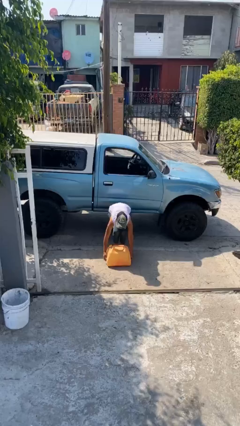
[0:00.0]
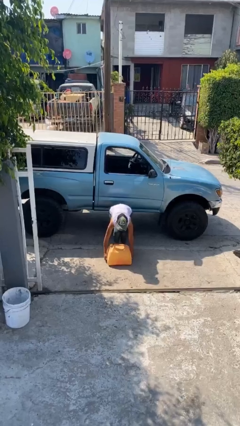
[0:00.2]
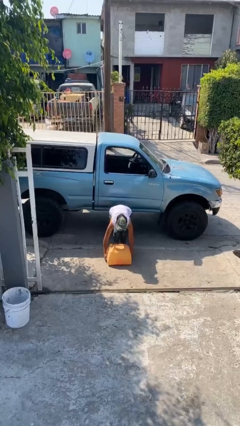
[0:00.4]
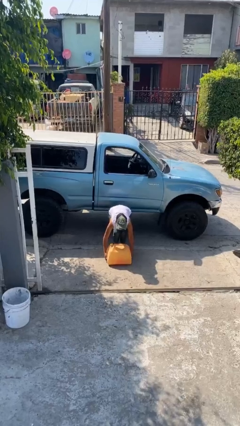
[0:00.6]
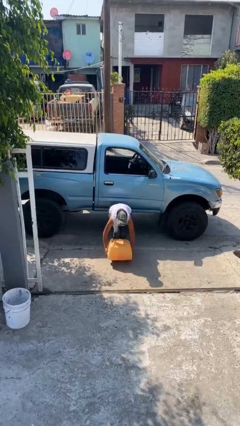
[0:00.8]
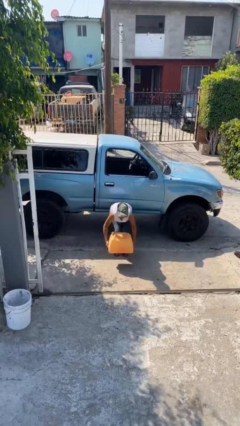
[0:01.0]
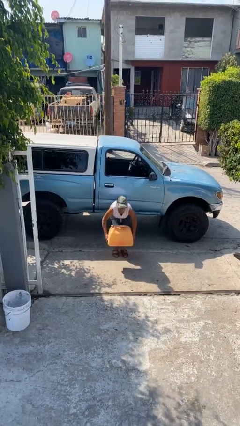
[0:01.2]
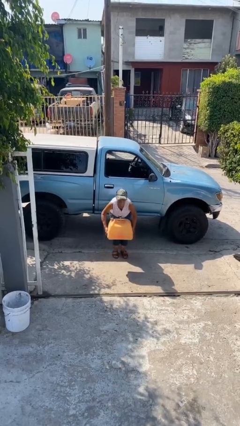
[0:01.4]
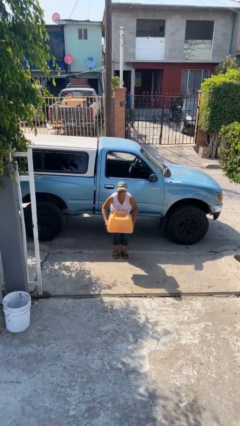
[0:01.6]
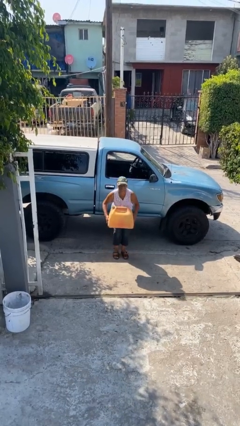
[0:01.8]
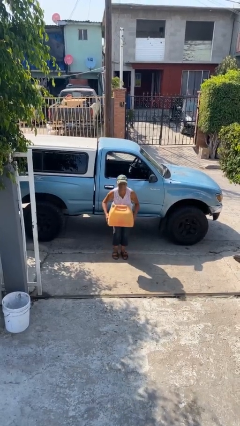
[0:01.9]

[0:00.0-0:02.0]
person picks up object from floor

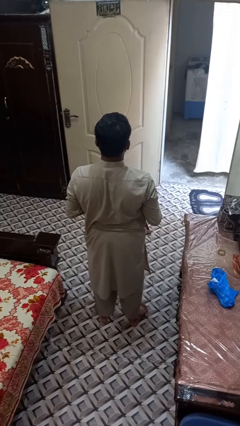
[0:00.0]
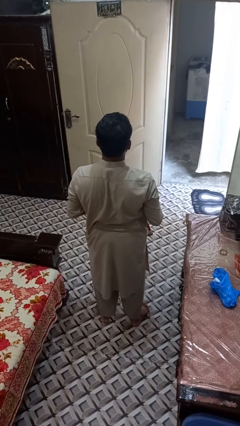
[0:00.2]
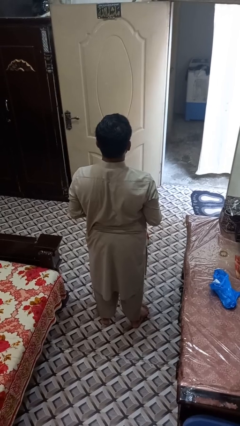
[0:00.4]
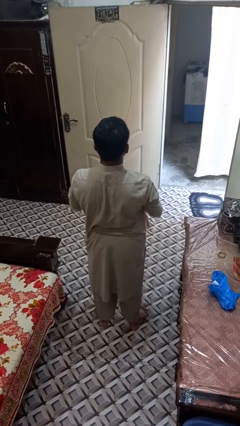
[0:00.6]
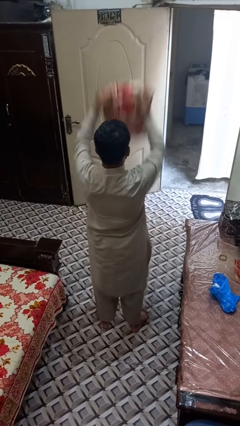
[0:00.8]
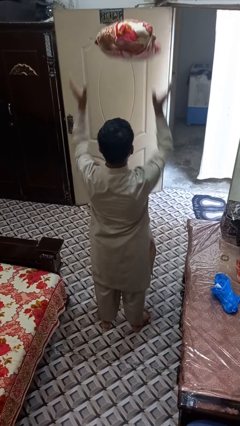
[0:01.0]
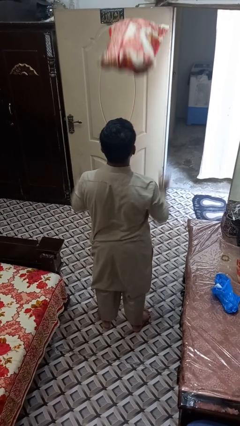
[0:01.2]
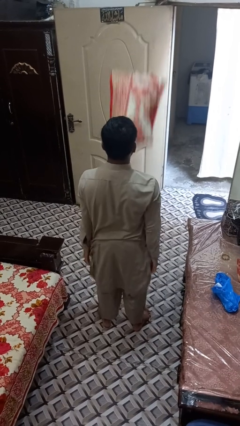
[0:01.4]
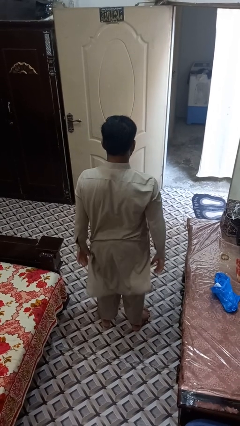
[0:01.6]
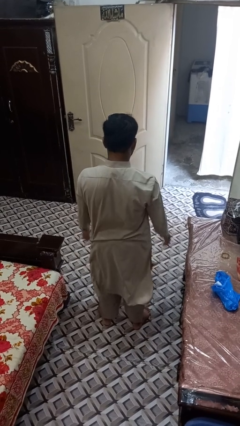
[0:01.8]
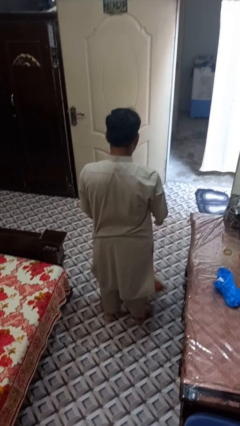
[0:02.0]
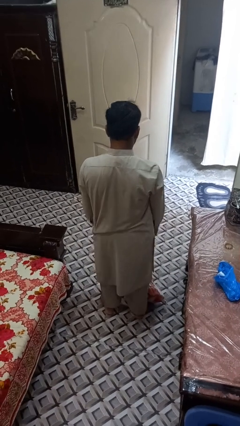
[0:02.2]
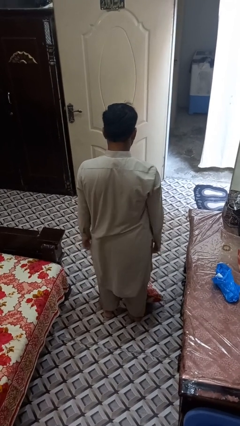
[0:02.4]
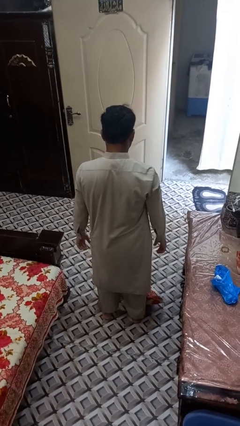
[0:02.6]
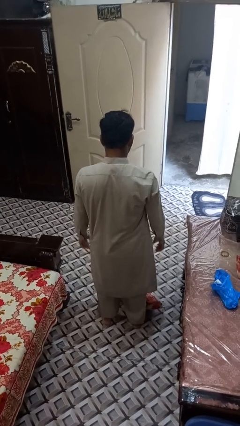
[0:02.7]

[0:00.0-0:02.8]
person throws object into air

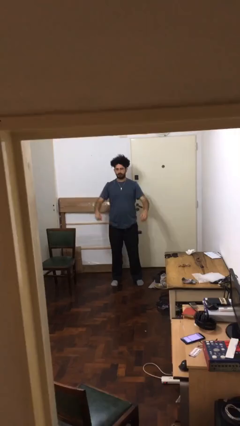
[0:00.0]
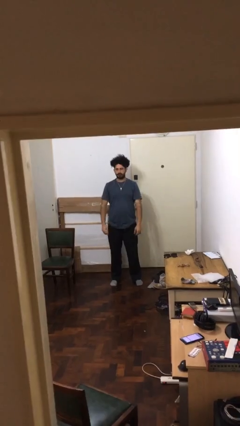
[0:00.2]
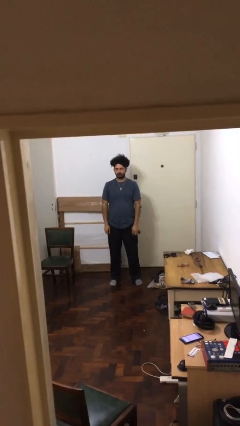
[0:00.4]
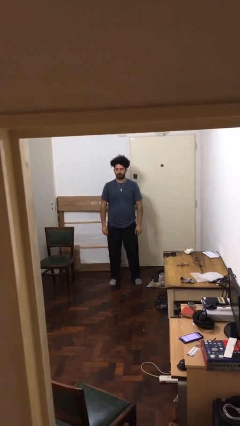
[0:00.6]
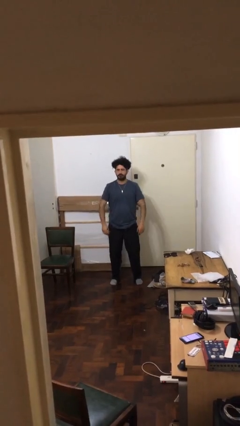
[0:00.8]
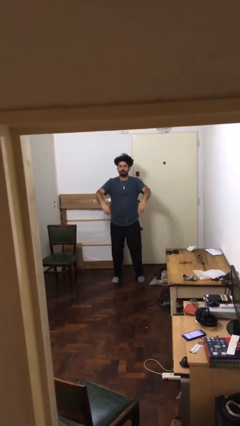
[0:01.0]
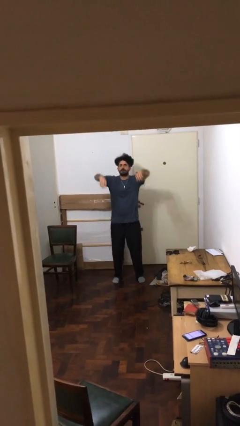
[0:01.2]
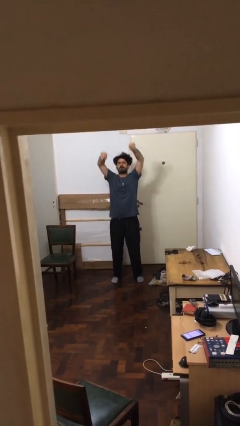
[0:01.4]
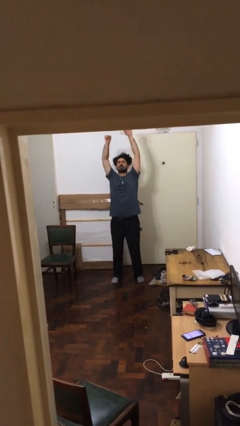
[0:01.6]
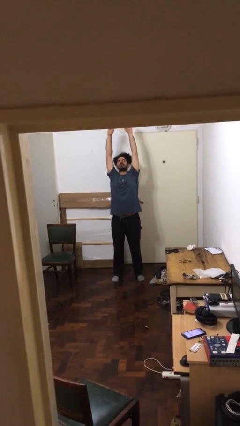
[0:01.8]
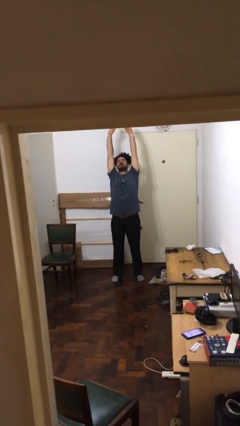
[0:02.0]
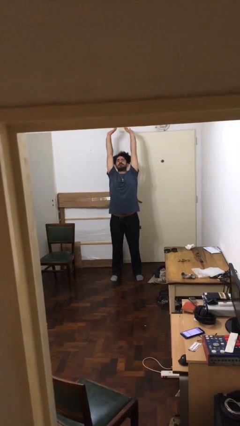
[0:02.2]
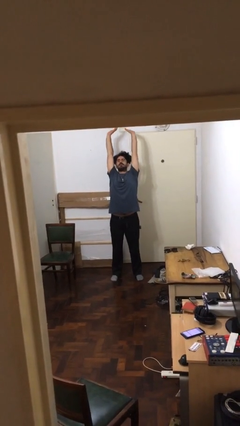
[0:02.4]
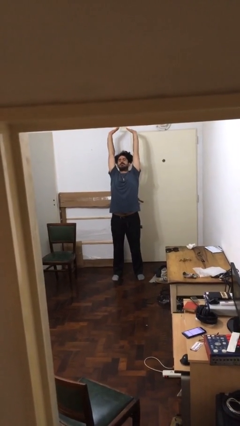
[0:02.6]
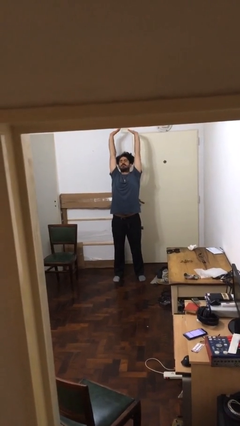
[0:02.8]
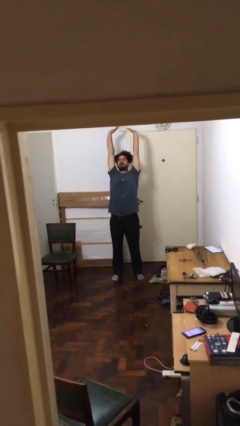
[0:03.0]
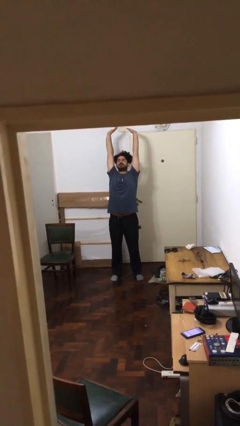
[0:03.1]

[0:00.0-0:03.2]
person stretches arms over head

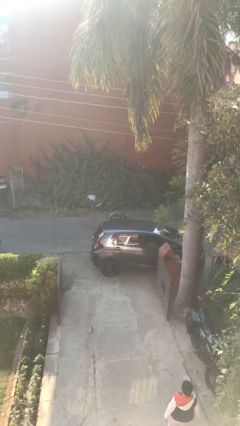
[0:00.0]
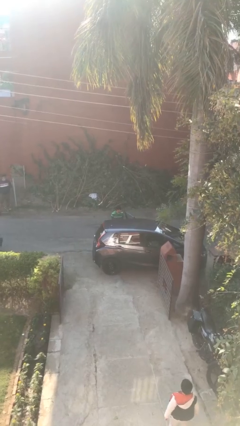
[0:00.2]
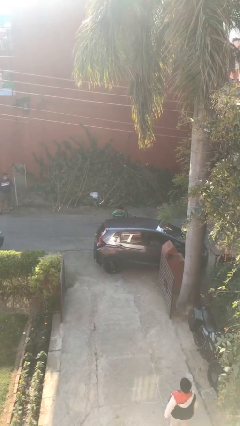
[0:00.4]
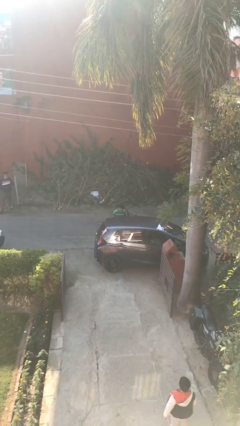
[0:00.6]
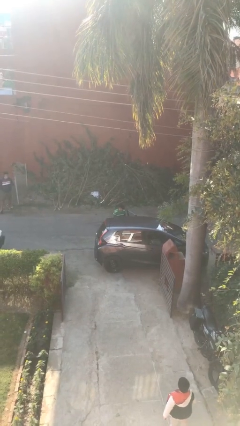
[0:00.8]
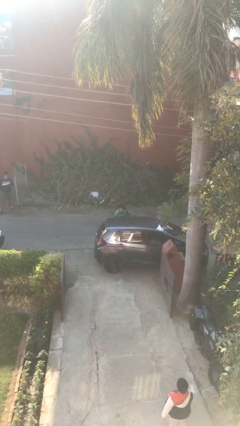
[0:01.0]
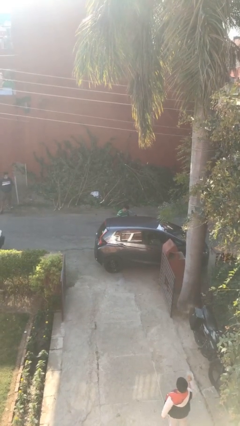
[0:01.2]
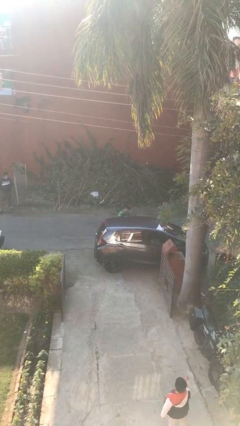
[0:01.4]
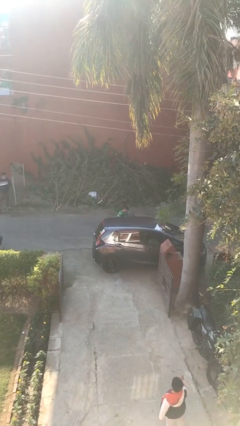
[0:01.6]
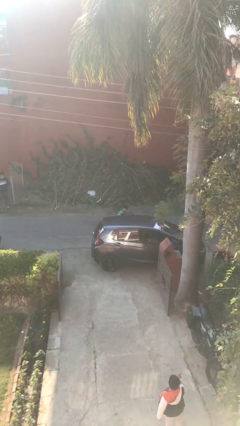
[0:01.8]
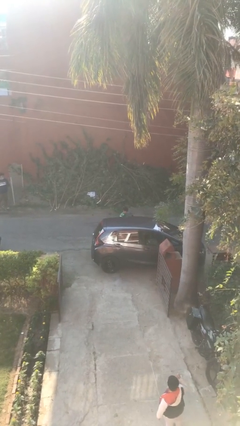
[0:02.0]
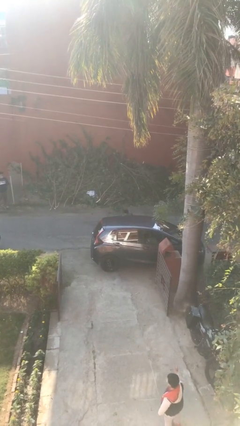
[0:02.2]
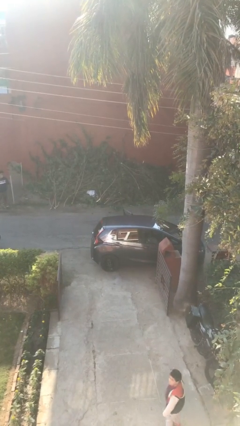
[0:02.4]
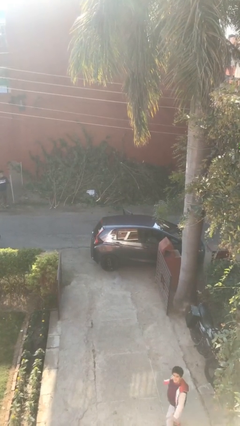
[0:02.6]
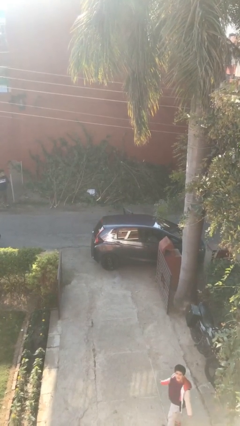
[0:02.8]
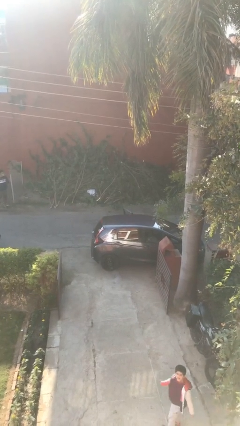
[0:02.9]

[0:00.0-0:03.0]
person enters car

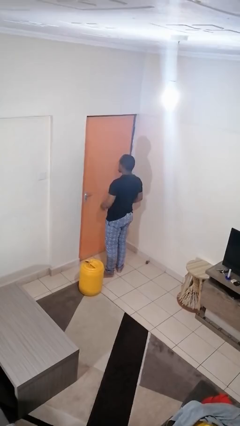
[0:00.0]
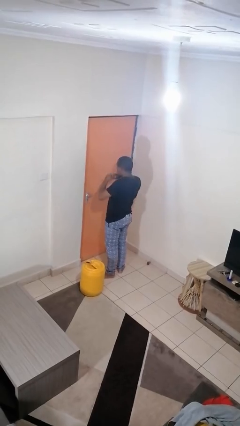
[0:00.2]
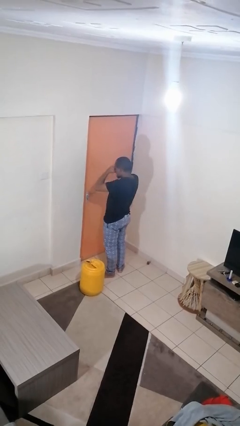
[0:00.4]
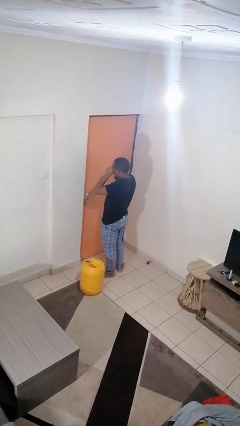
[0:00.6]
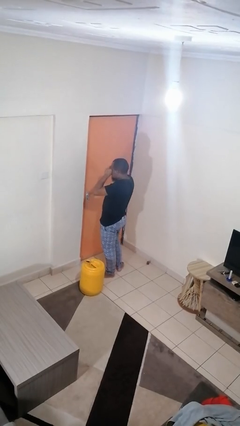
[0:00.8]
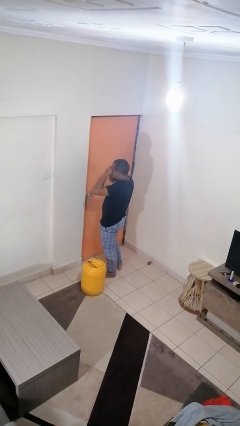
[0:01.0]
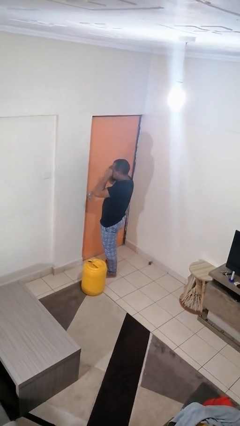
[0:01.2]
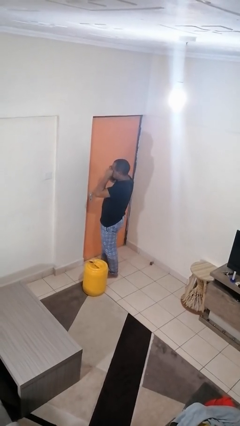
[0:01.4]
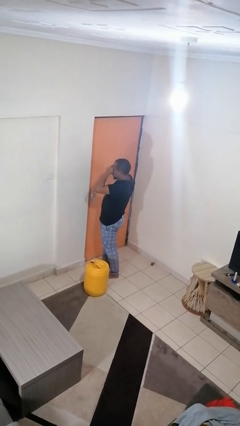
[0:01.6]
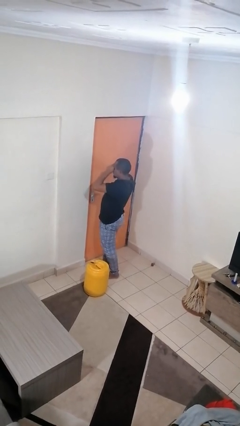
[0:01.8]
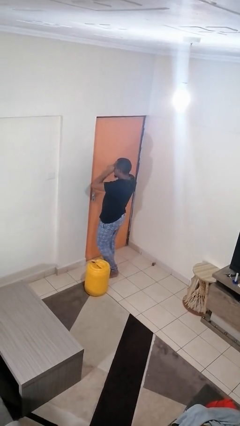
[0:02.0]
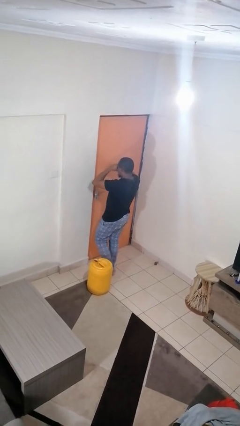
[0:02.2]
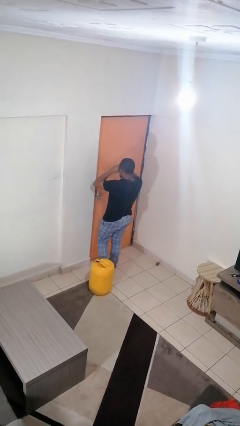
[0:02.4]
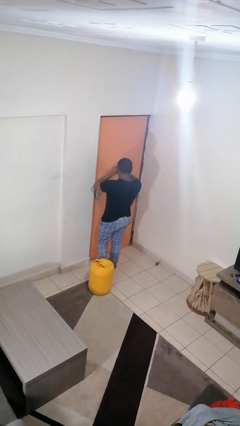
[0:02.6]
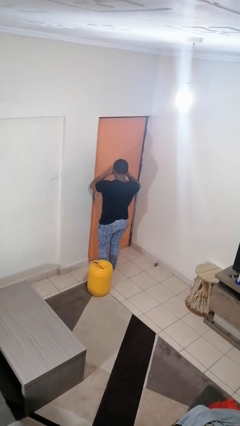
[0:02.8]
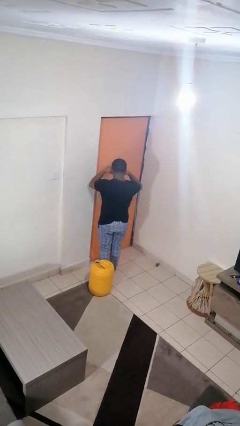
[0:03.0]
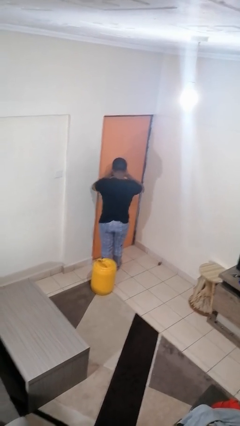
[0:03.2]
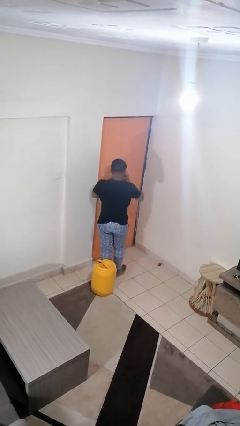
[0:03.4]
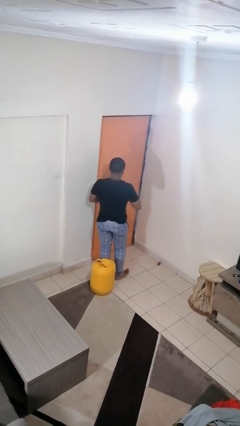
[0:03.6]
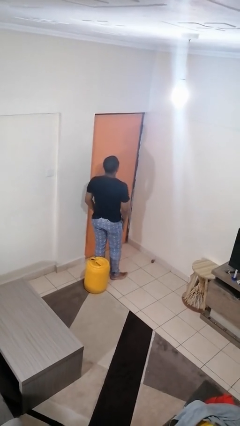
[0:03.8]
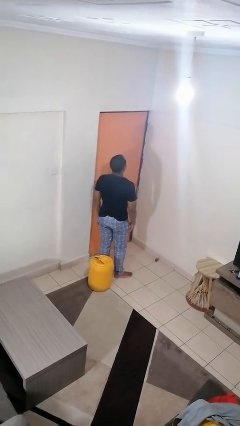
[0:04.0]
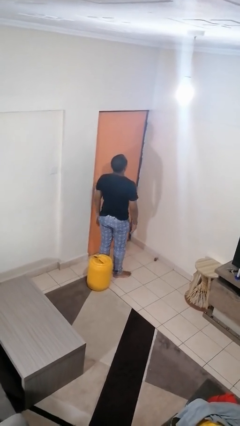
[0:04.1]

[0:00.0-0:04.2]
person rubs eyes

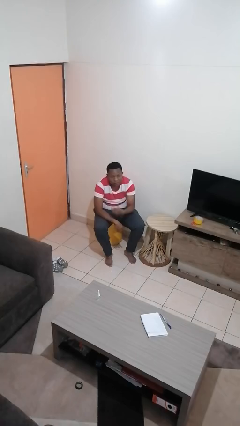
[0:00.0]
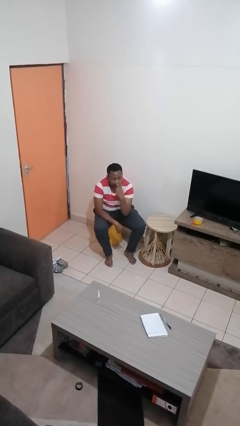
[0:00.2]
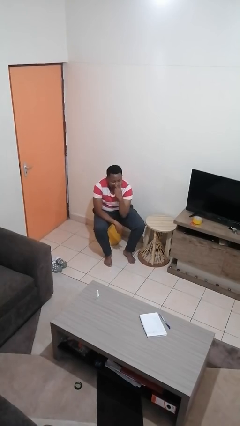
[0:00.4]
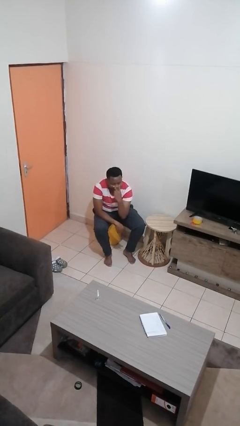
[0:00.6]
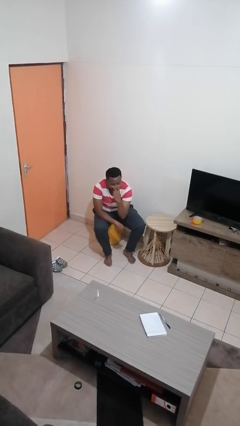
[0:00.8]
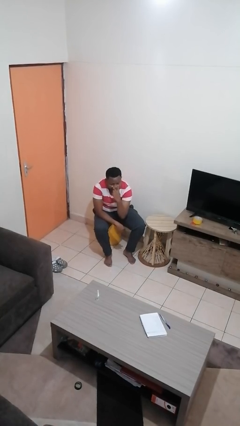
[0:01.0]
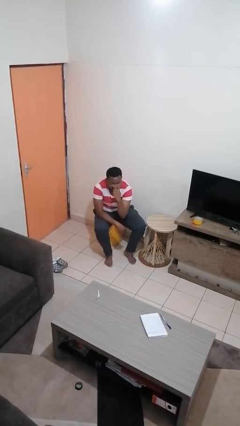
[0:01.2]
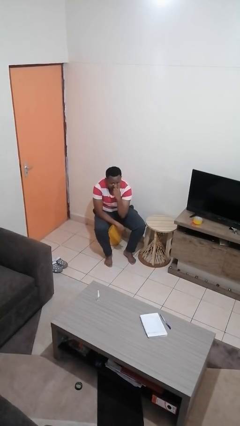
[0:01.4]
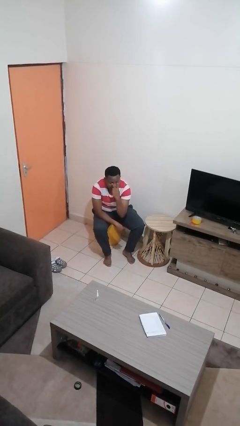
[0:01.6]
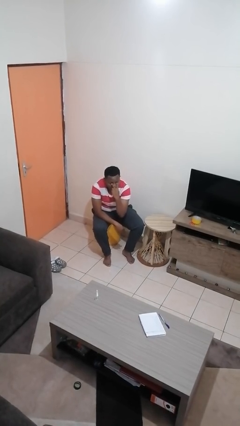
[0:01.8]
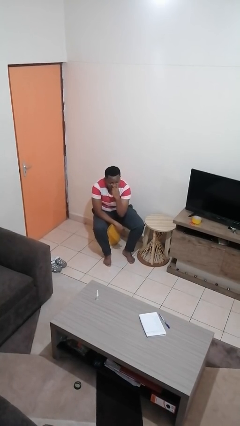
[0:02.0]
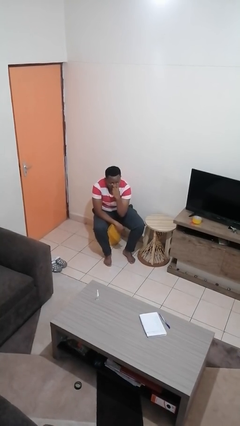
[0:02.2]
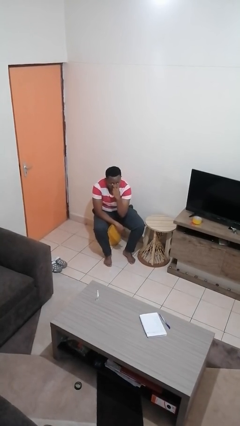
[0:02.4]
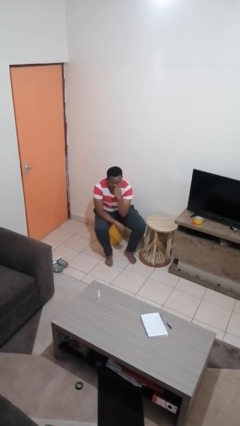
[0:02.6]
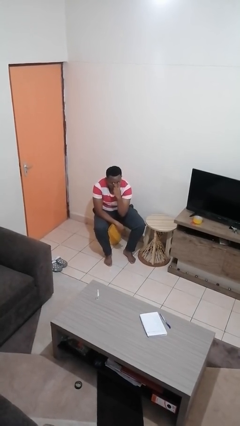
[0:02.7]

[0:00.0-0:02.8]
person gestures watch closely
